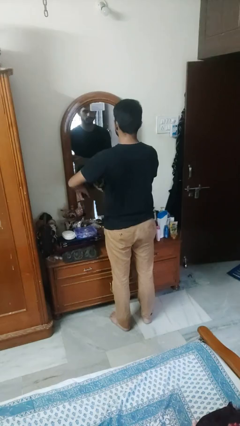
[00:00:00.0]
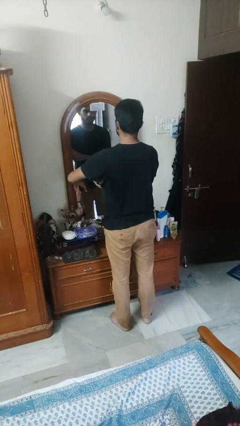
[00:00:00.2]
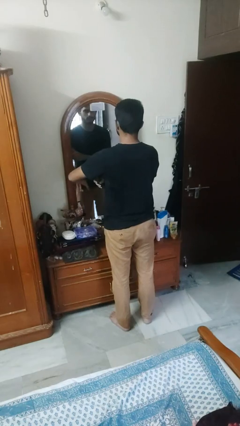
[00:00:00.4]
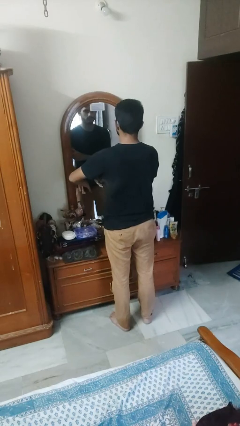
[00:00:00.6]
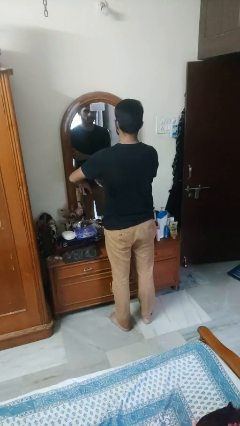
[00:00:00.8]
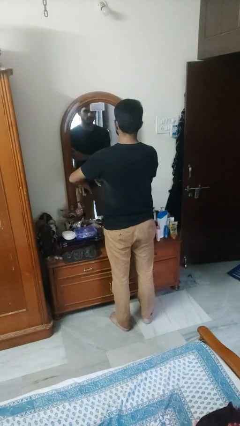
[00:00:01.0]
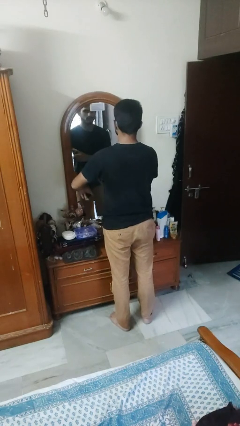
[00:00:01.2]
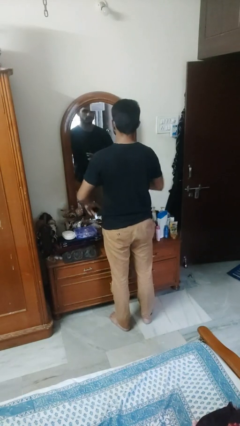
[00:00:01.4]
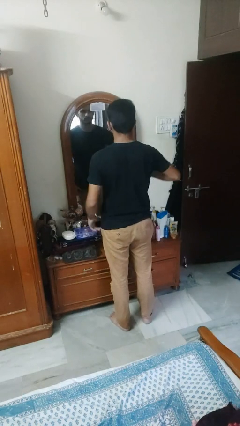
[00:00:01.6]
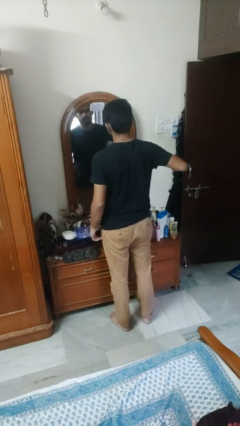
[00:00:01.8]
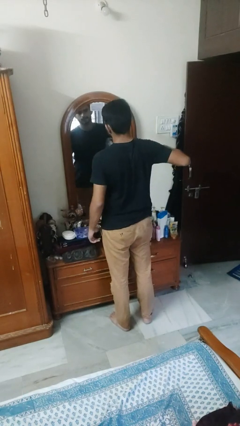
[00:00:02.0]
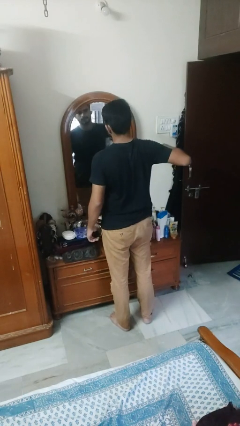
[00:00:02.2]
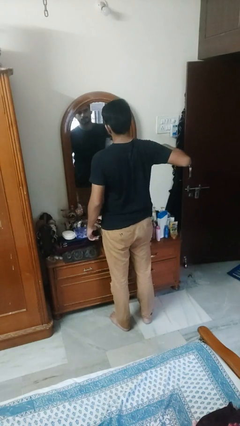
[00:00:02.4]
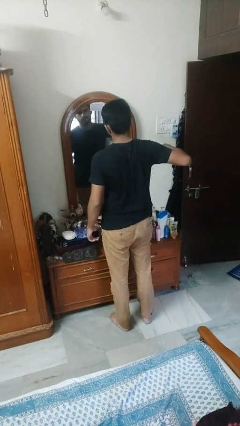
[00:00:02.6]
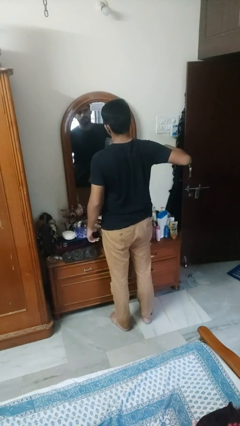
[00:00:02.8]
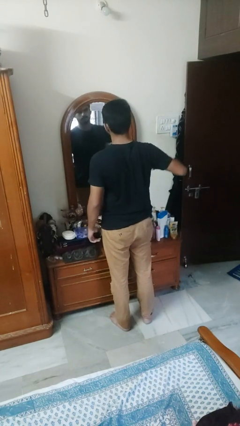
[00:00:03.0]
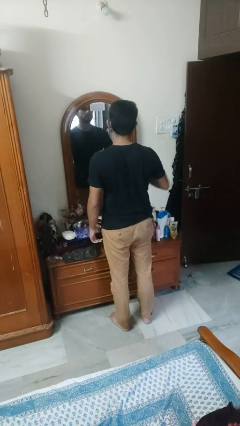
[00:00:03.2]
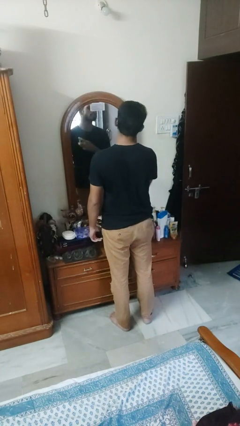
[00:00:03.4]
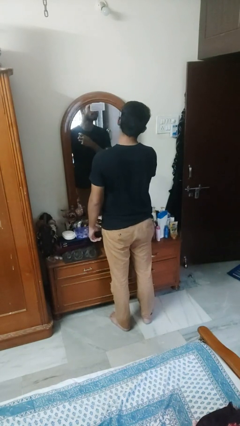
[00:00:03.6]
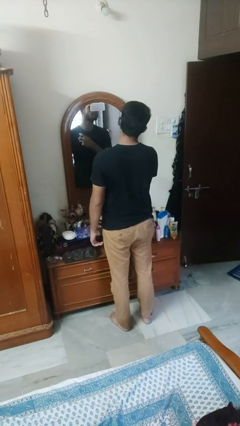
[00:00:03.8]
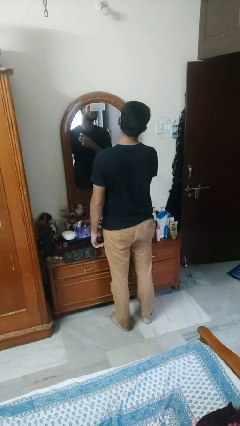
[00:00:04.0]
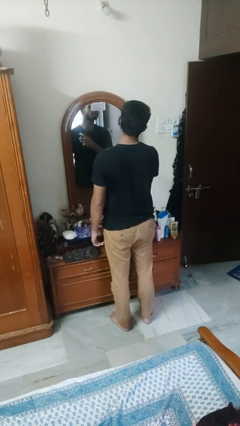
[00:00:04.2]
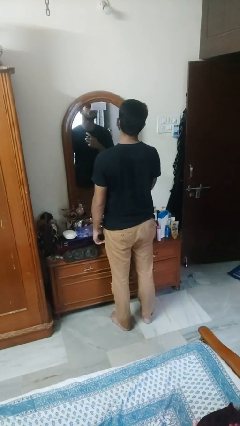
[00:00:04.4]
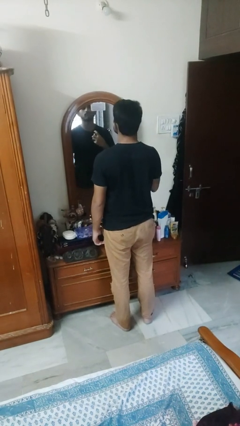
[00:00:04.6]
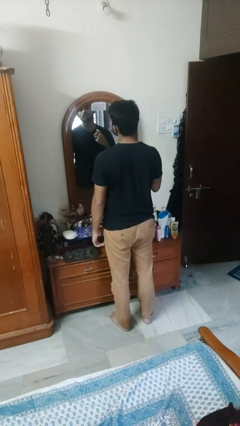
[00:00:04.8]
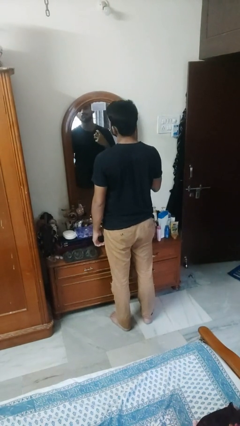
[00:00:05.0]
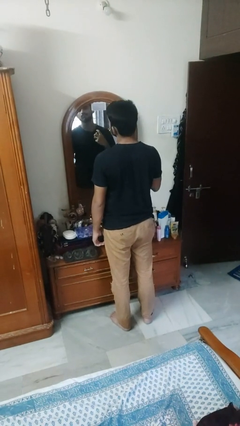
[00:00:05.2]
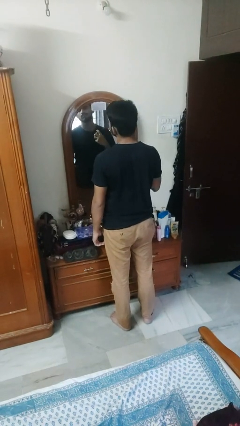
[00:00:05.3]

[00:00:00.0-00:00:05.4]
person applies deodorant

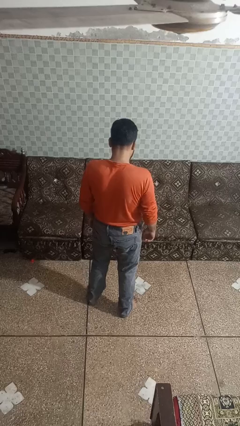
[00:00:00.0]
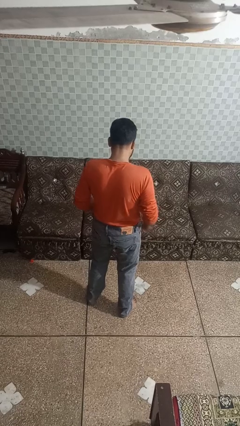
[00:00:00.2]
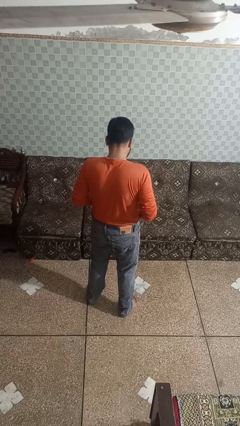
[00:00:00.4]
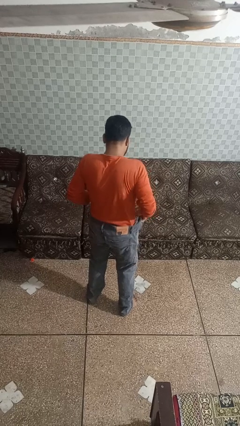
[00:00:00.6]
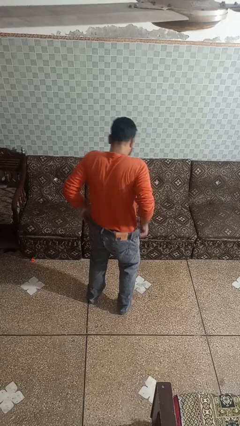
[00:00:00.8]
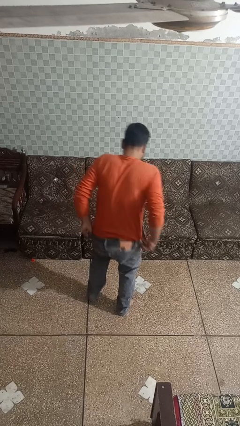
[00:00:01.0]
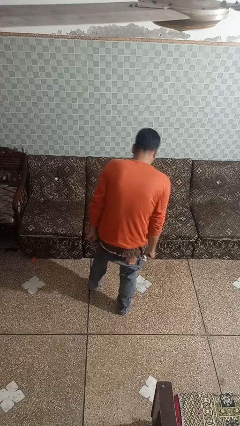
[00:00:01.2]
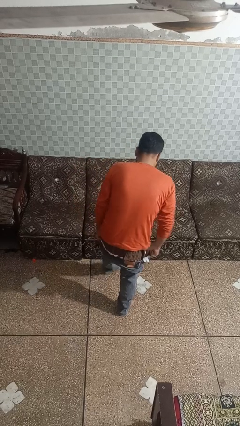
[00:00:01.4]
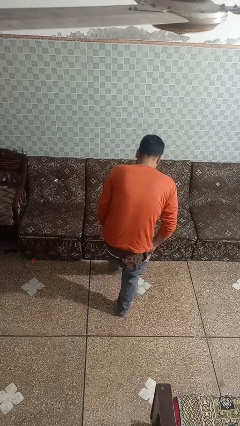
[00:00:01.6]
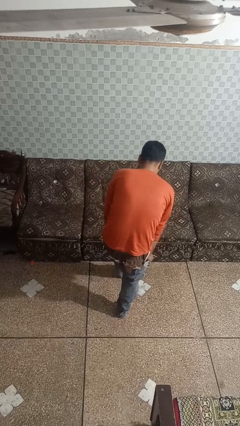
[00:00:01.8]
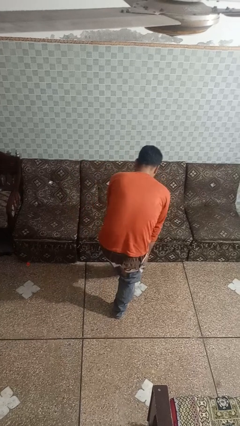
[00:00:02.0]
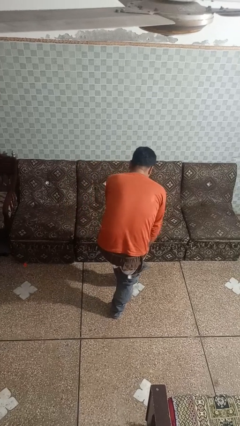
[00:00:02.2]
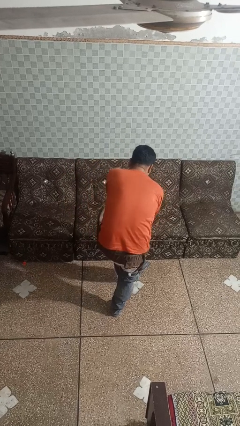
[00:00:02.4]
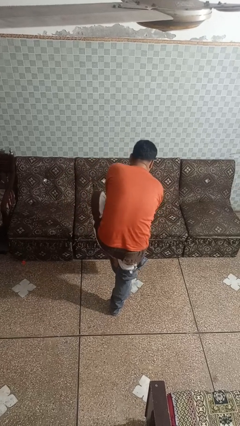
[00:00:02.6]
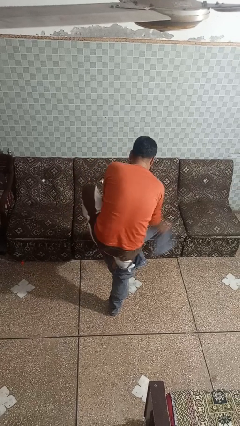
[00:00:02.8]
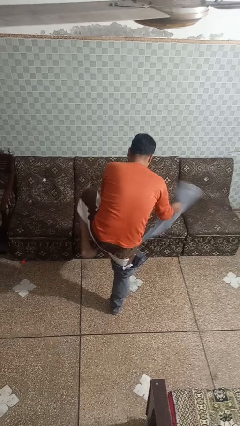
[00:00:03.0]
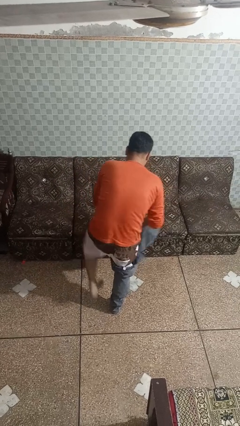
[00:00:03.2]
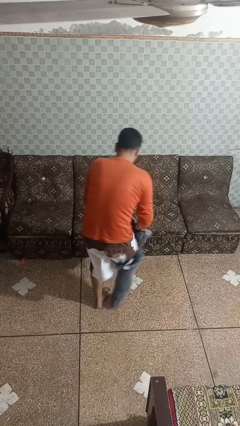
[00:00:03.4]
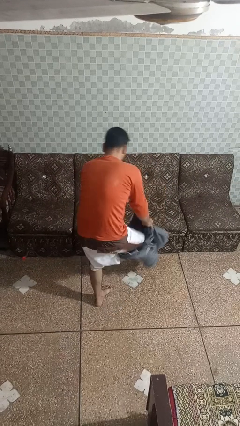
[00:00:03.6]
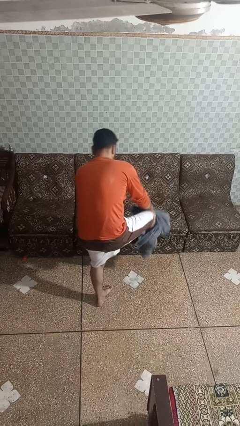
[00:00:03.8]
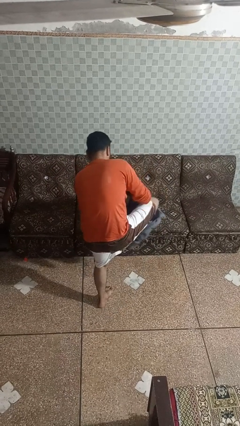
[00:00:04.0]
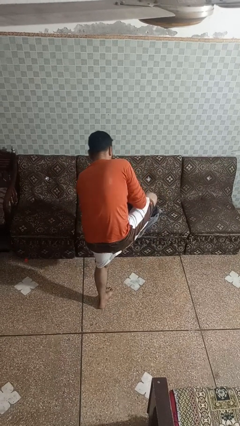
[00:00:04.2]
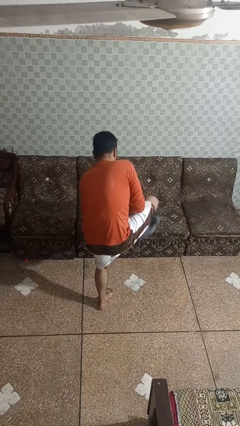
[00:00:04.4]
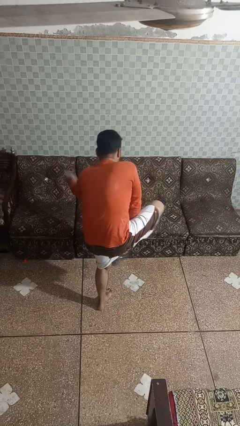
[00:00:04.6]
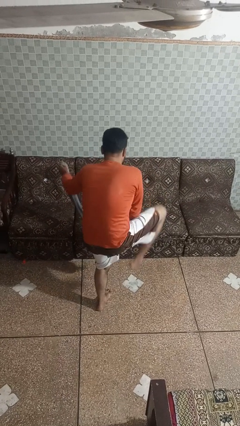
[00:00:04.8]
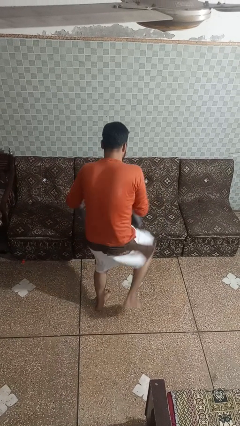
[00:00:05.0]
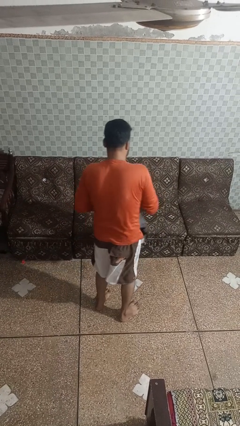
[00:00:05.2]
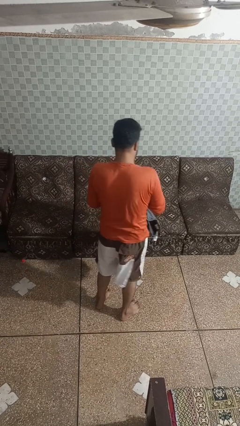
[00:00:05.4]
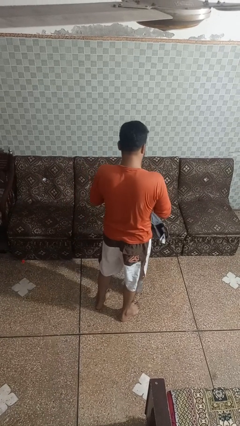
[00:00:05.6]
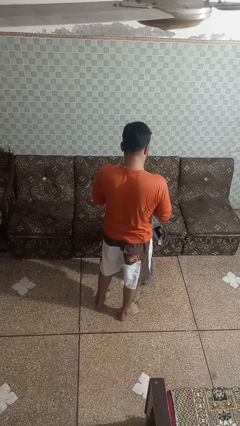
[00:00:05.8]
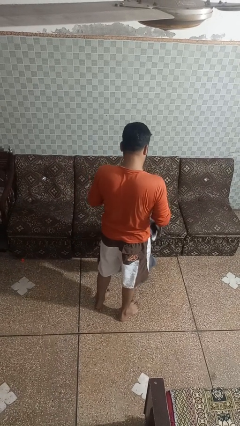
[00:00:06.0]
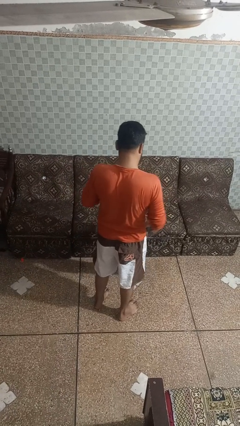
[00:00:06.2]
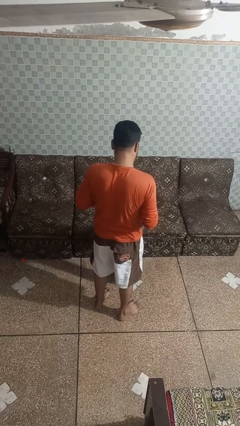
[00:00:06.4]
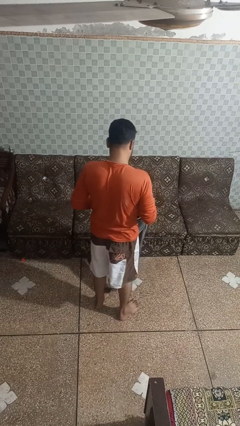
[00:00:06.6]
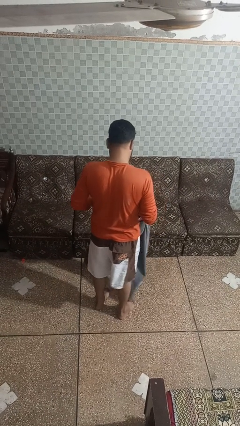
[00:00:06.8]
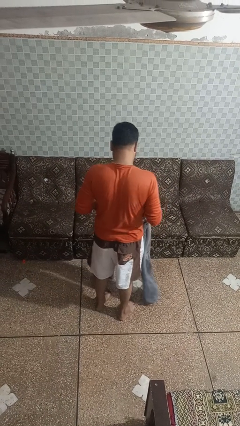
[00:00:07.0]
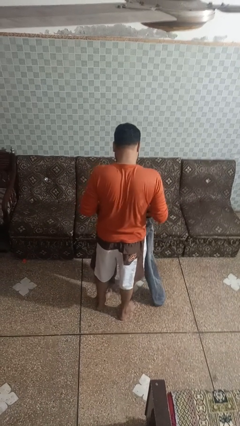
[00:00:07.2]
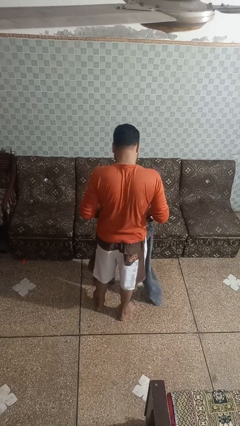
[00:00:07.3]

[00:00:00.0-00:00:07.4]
person takes off pants

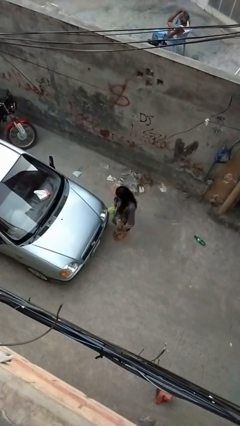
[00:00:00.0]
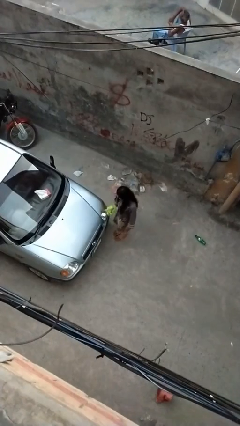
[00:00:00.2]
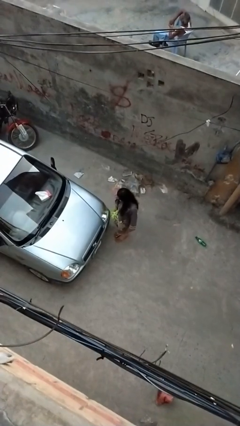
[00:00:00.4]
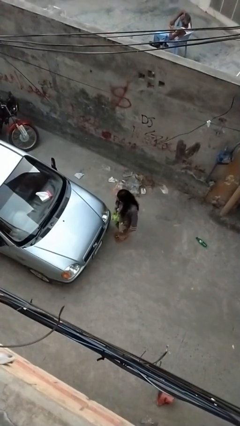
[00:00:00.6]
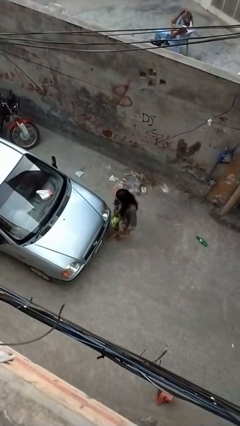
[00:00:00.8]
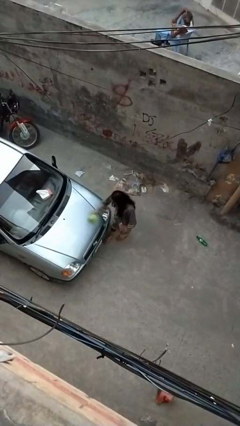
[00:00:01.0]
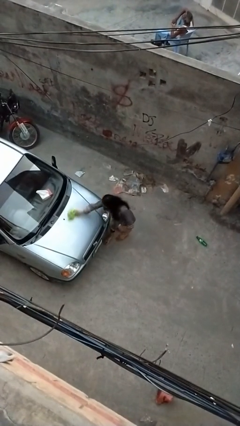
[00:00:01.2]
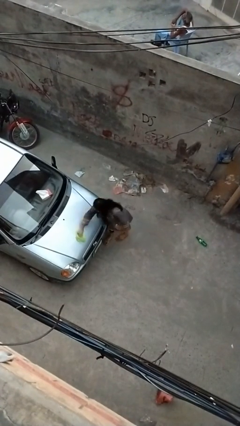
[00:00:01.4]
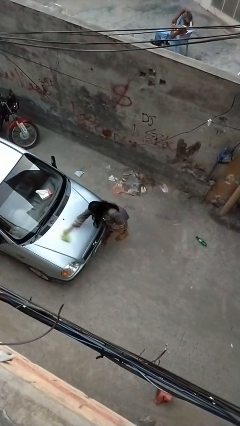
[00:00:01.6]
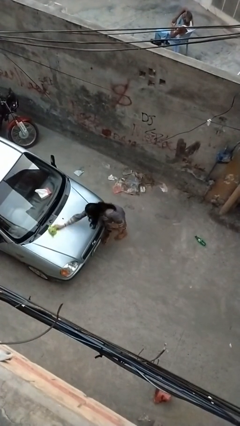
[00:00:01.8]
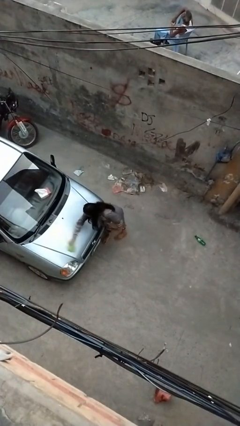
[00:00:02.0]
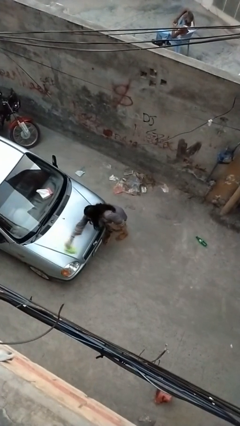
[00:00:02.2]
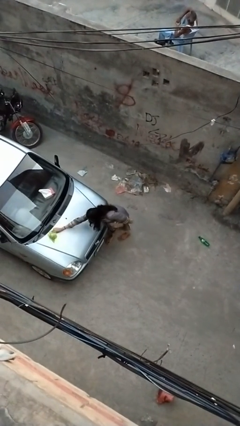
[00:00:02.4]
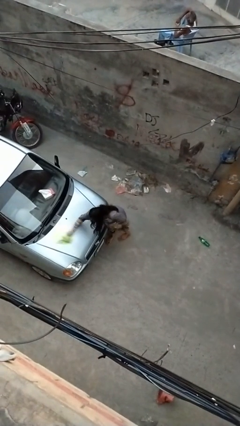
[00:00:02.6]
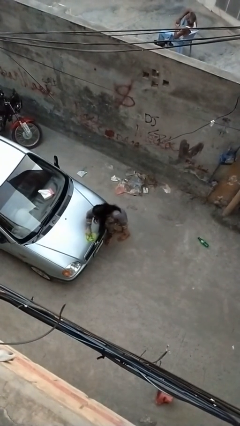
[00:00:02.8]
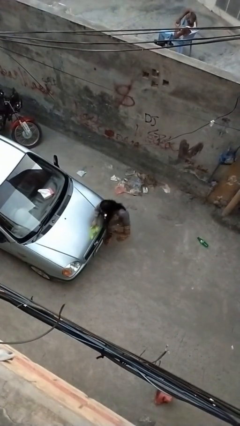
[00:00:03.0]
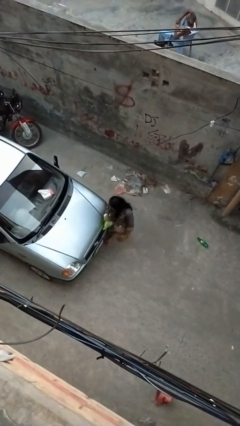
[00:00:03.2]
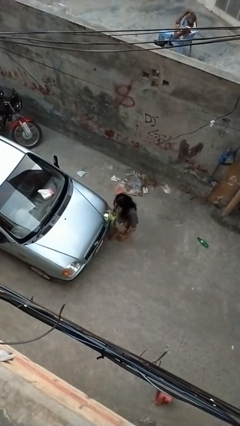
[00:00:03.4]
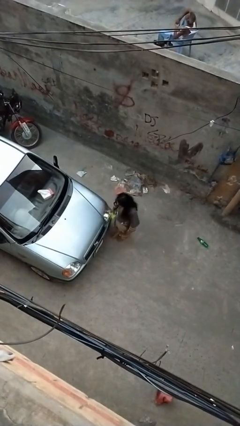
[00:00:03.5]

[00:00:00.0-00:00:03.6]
person polishes car with rag

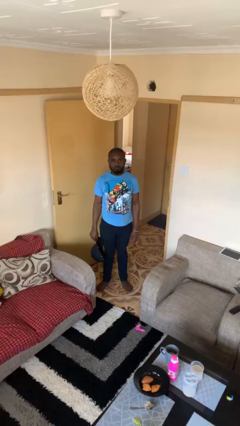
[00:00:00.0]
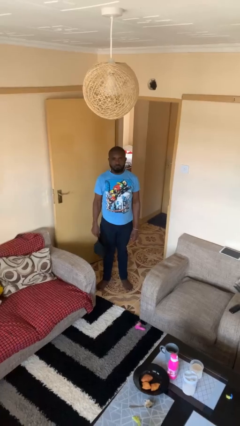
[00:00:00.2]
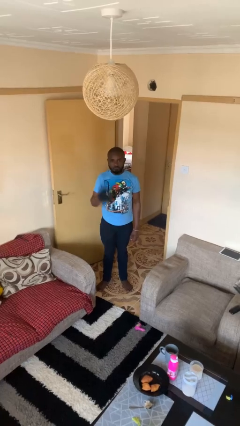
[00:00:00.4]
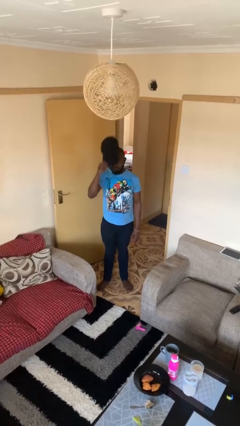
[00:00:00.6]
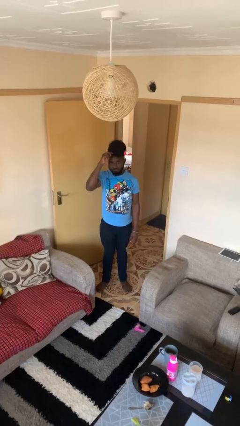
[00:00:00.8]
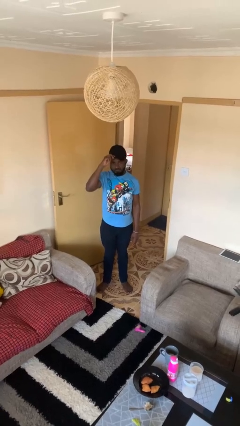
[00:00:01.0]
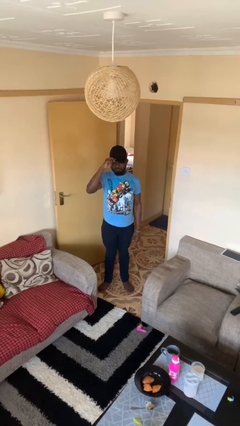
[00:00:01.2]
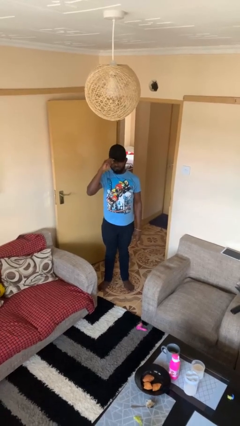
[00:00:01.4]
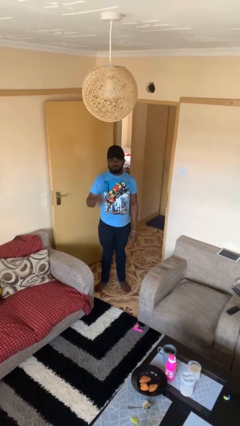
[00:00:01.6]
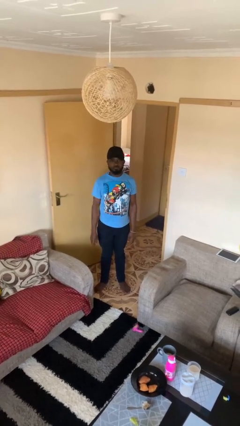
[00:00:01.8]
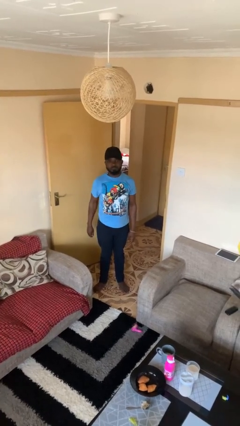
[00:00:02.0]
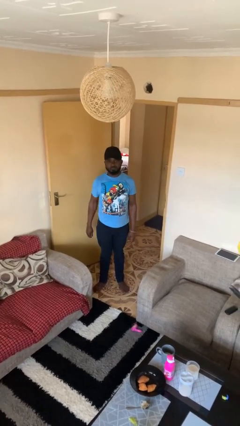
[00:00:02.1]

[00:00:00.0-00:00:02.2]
person puts on hat
